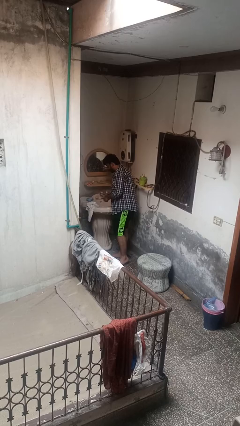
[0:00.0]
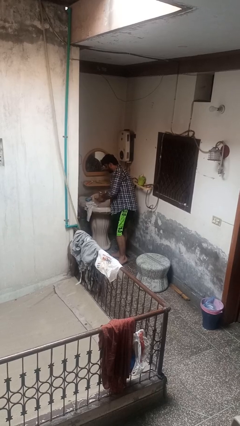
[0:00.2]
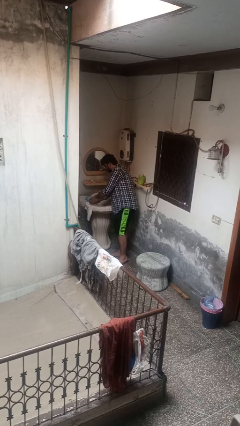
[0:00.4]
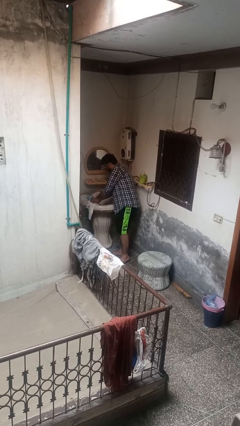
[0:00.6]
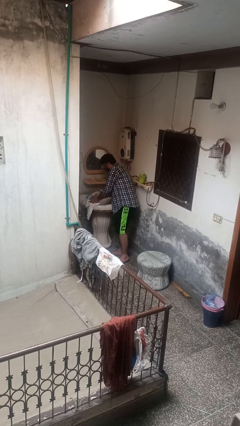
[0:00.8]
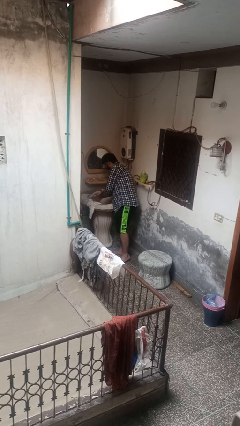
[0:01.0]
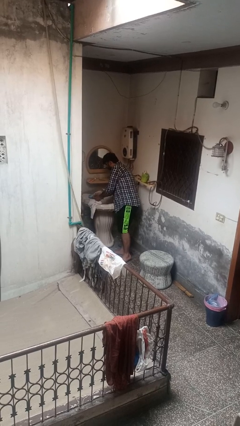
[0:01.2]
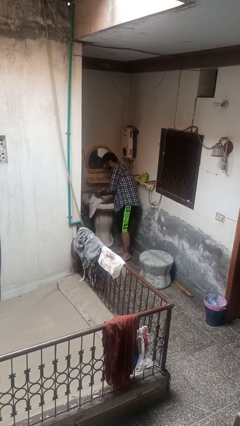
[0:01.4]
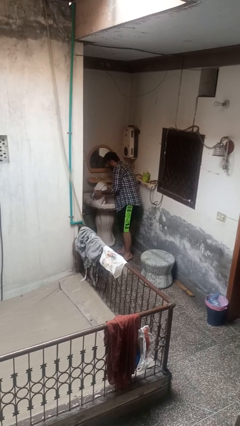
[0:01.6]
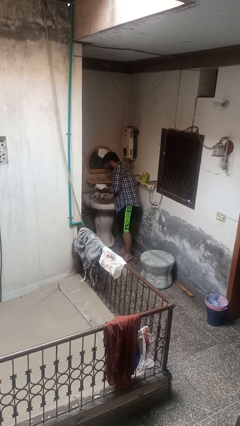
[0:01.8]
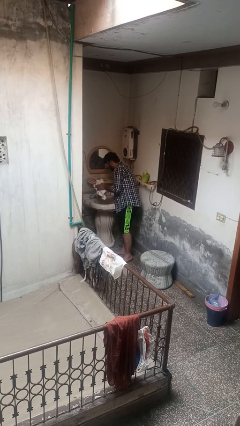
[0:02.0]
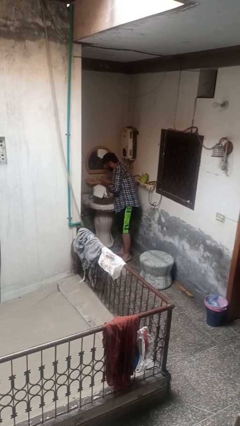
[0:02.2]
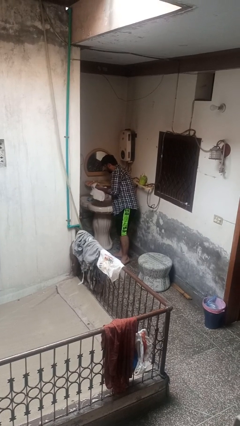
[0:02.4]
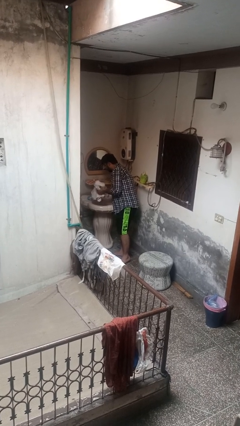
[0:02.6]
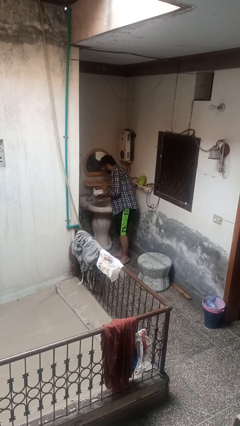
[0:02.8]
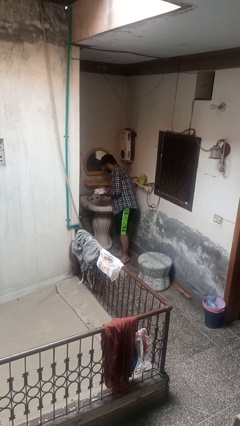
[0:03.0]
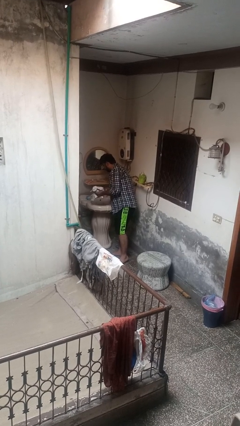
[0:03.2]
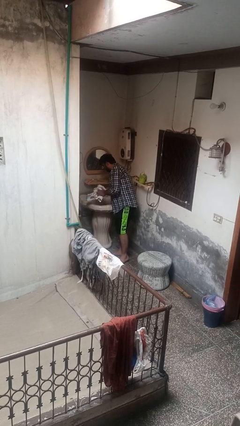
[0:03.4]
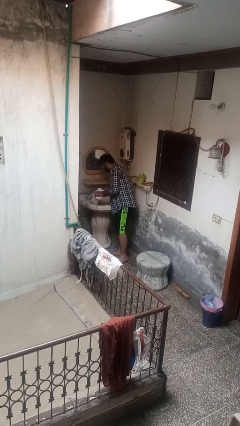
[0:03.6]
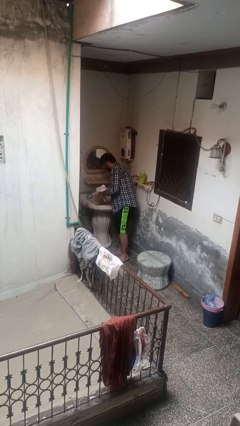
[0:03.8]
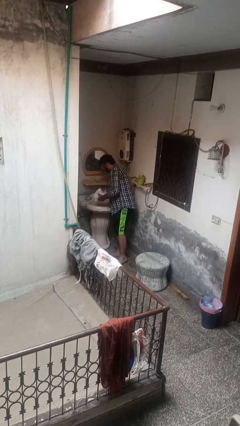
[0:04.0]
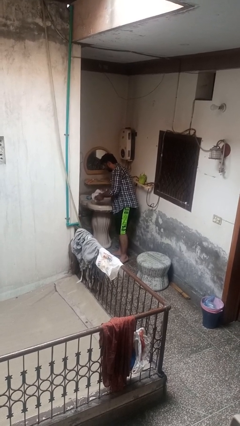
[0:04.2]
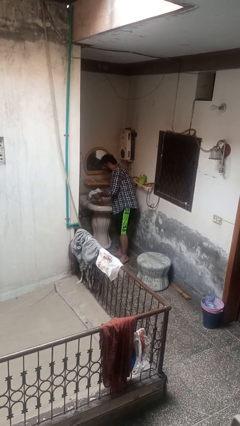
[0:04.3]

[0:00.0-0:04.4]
person dries hands with towel

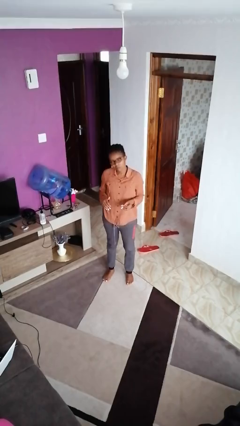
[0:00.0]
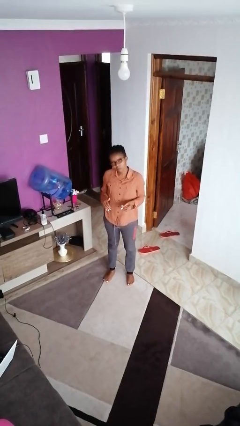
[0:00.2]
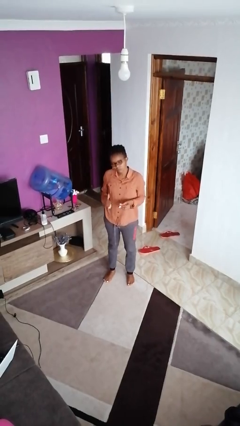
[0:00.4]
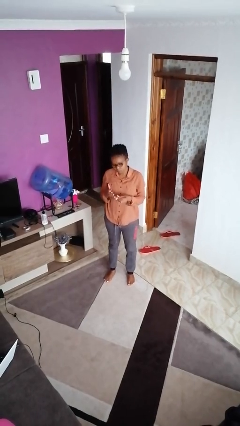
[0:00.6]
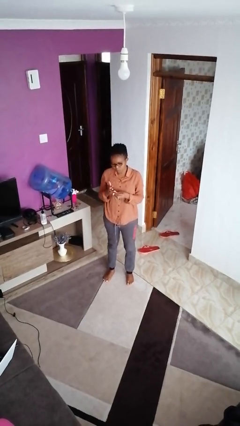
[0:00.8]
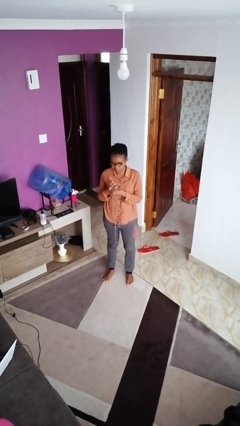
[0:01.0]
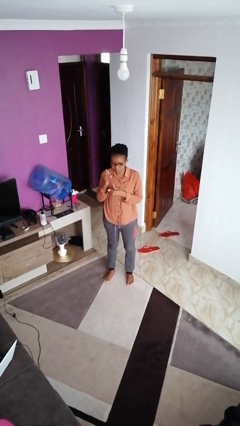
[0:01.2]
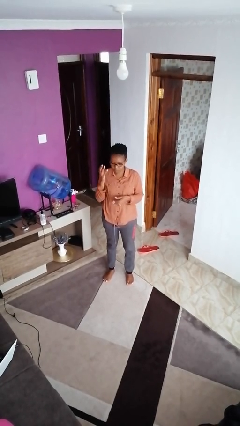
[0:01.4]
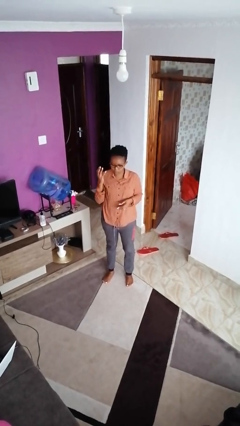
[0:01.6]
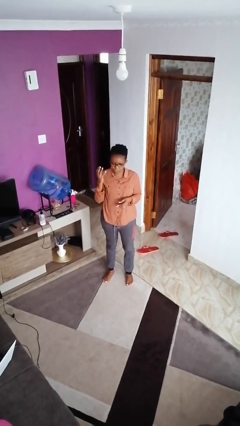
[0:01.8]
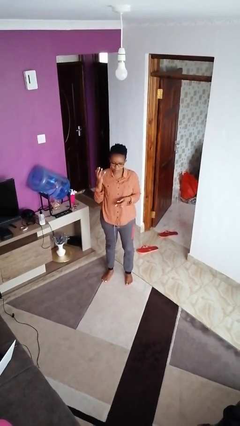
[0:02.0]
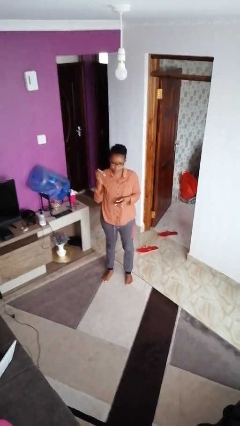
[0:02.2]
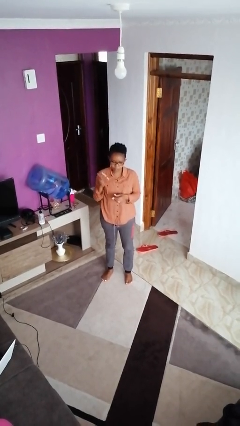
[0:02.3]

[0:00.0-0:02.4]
person puts on ring

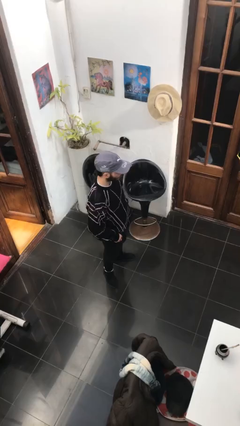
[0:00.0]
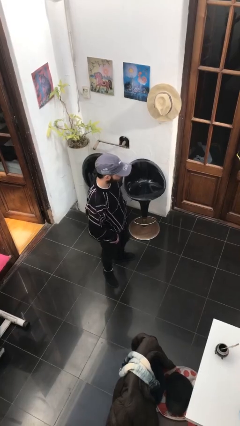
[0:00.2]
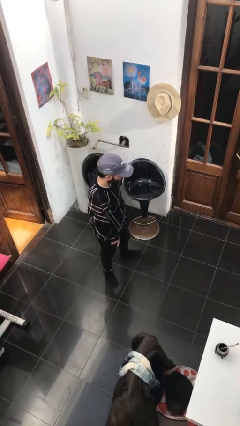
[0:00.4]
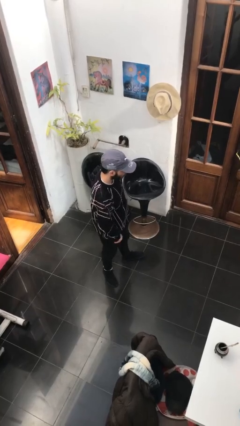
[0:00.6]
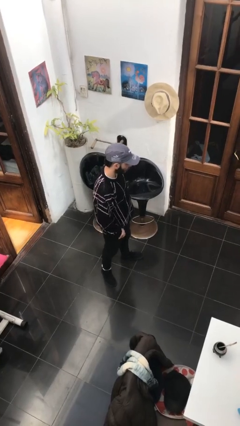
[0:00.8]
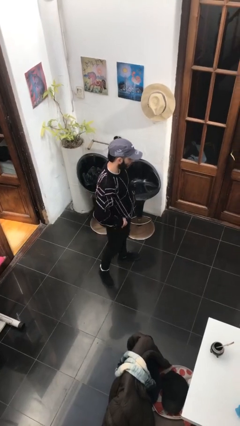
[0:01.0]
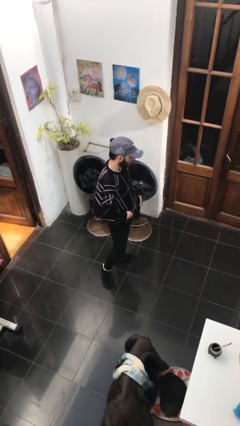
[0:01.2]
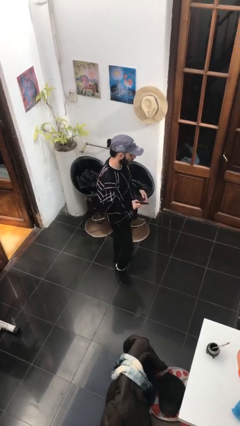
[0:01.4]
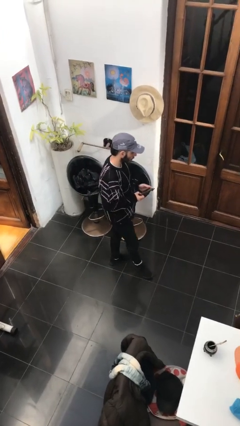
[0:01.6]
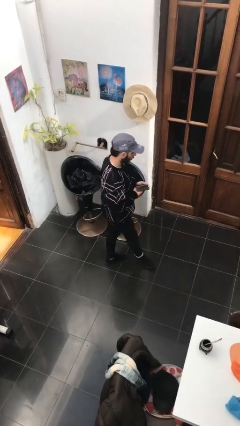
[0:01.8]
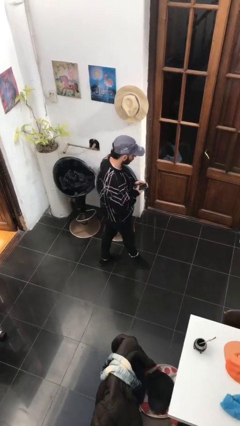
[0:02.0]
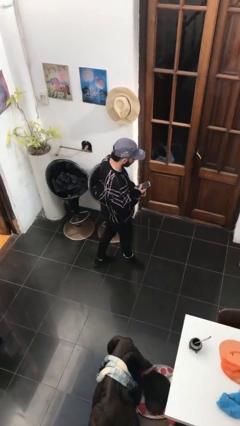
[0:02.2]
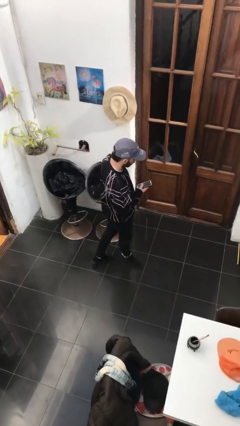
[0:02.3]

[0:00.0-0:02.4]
person takes phone from pocket

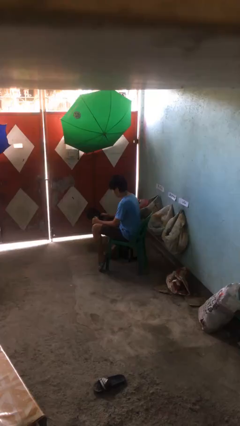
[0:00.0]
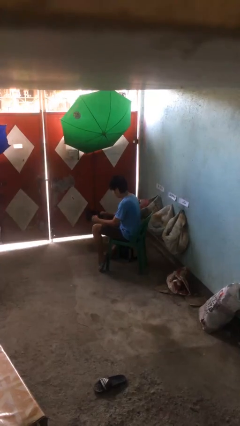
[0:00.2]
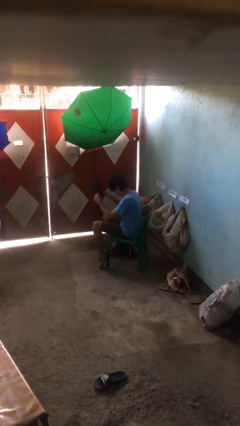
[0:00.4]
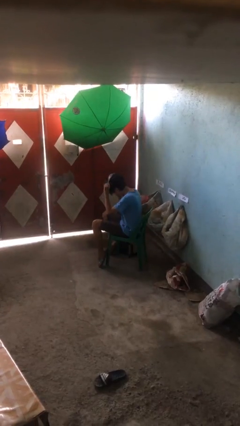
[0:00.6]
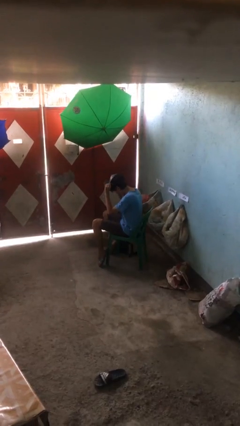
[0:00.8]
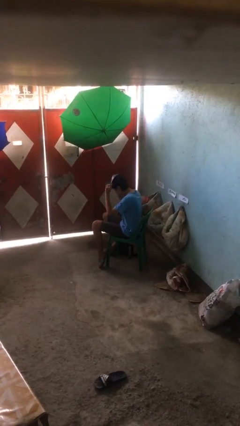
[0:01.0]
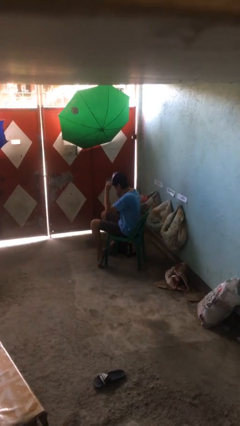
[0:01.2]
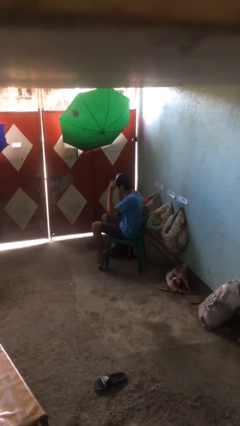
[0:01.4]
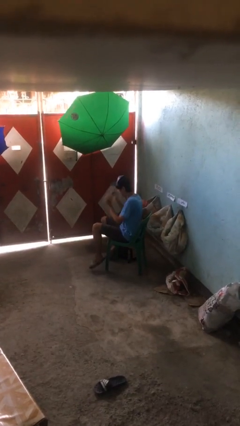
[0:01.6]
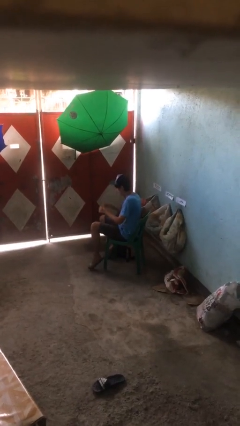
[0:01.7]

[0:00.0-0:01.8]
person puts on hat

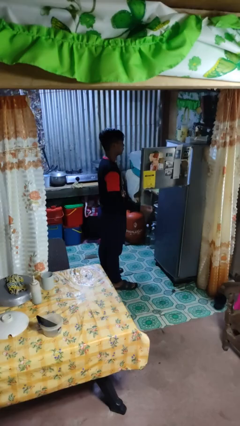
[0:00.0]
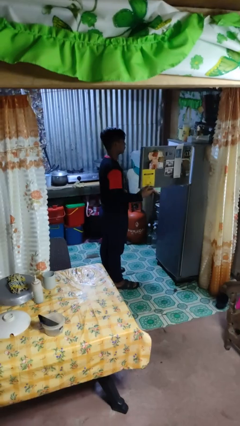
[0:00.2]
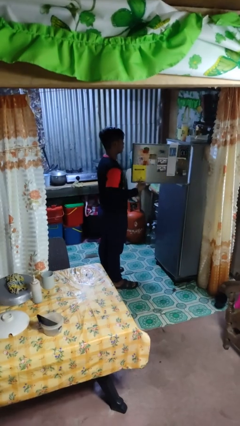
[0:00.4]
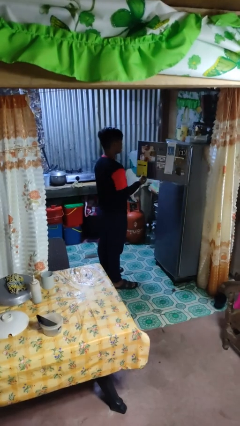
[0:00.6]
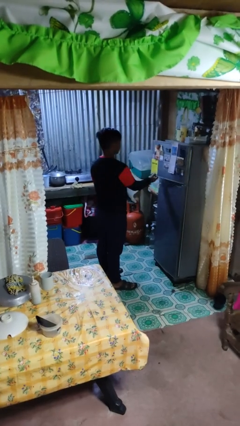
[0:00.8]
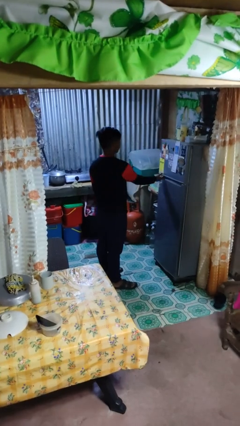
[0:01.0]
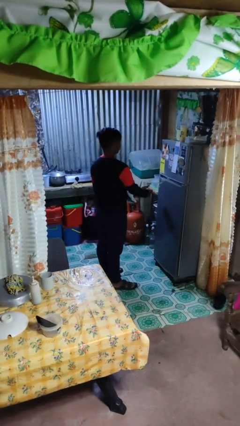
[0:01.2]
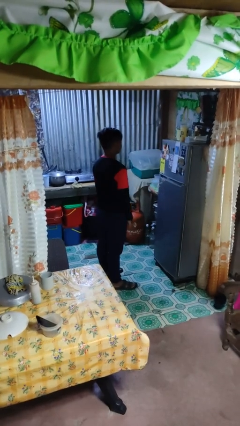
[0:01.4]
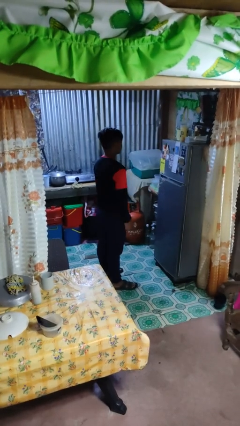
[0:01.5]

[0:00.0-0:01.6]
person closes refrigerator

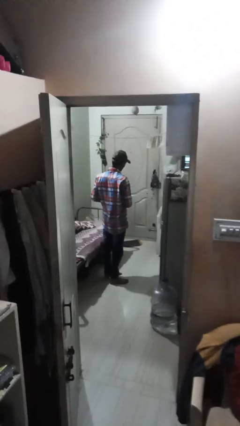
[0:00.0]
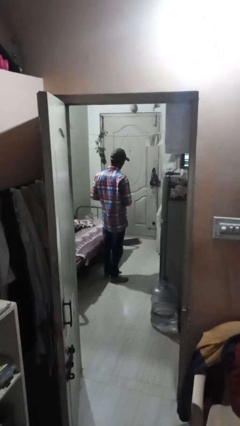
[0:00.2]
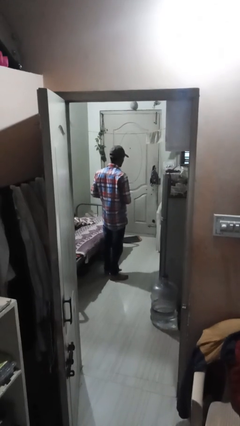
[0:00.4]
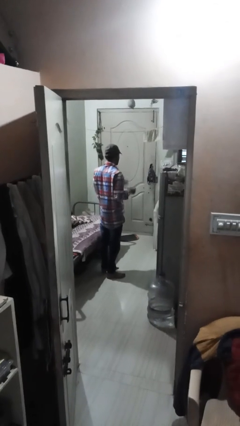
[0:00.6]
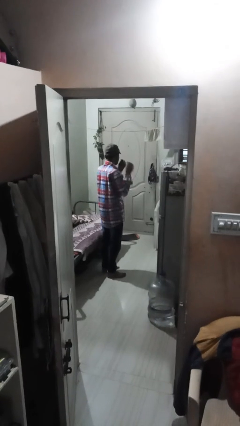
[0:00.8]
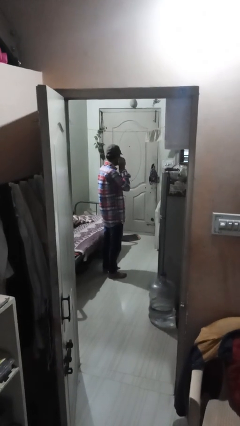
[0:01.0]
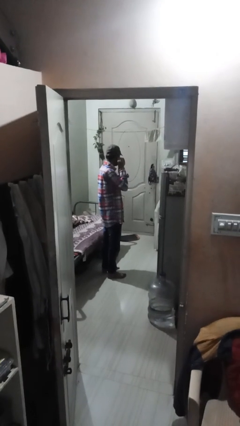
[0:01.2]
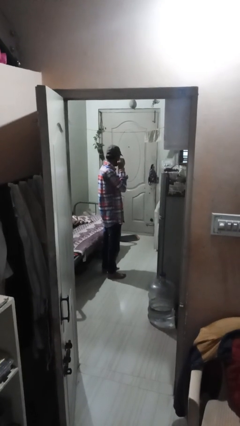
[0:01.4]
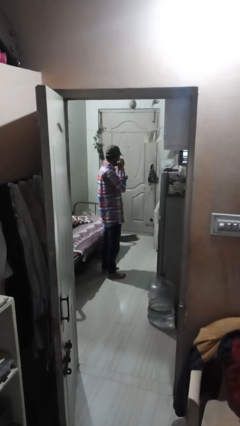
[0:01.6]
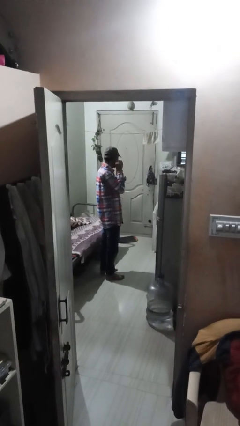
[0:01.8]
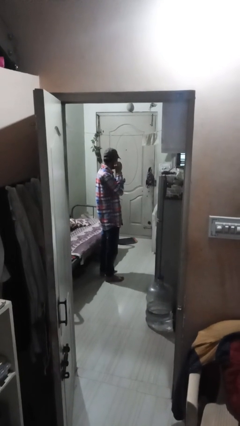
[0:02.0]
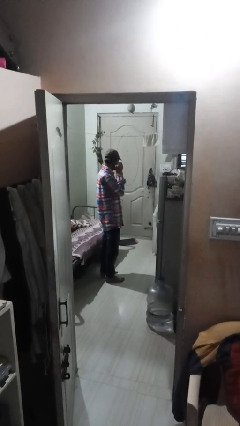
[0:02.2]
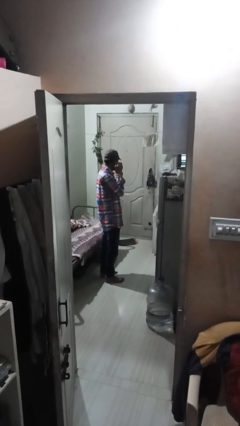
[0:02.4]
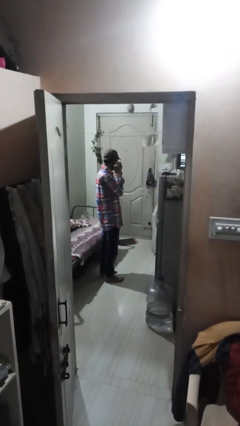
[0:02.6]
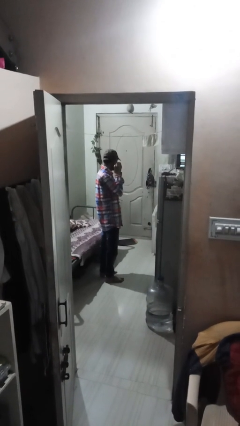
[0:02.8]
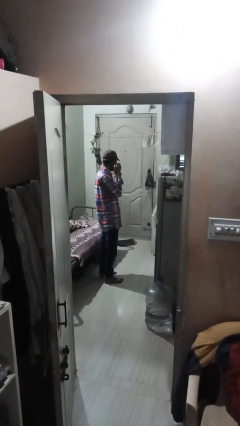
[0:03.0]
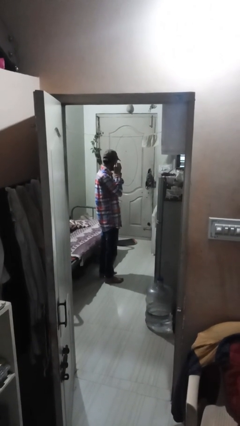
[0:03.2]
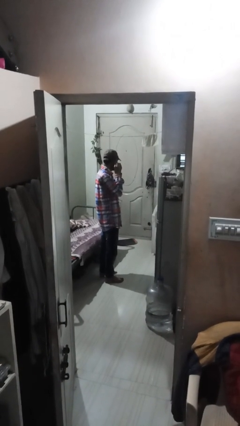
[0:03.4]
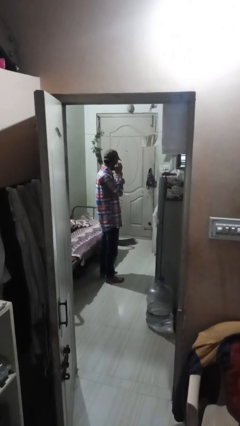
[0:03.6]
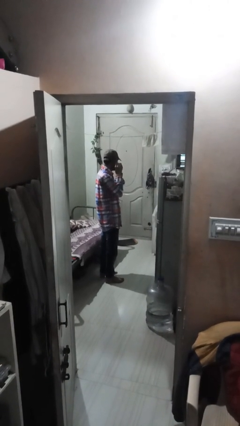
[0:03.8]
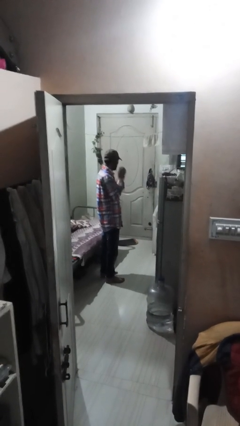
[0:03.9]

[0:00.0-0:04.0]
person puts on earrings

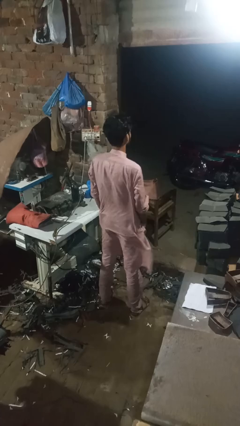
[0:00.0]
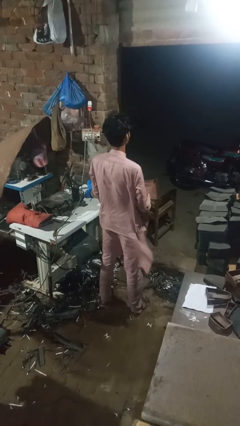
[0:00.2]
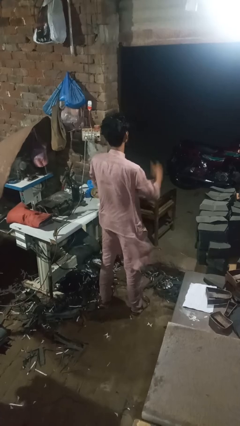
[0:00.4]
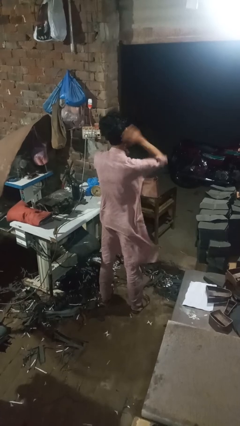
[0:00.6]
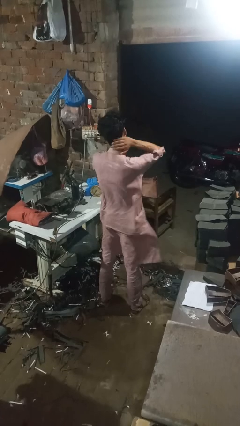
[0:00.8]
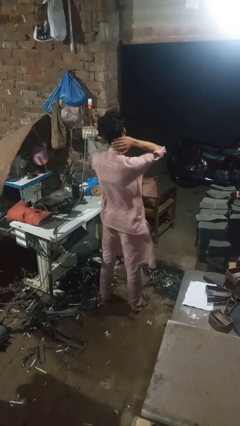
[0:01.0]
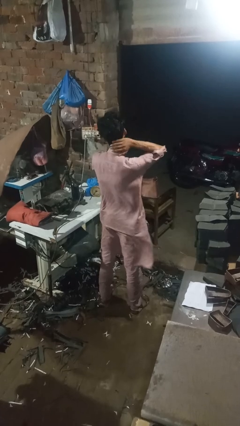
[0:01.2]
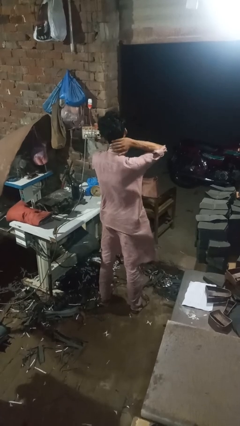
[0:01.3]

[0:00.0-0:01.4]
person rubs neck
